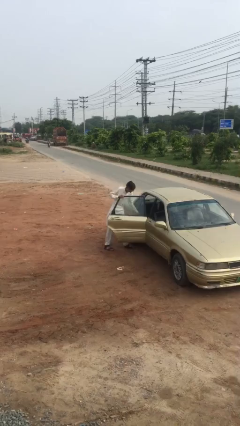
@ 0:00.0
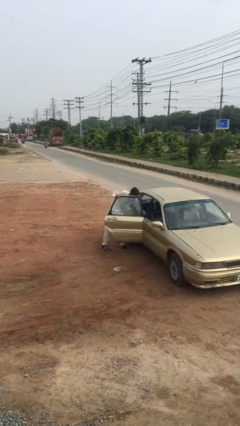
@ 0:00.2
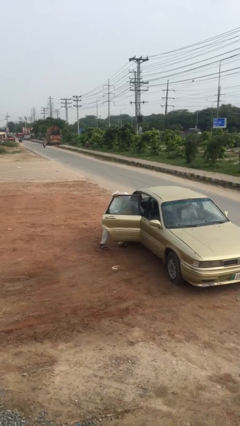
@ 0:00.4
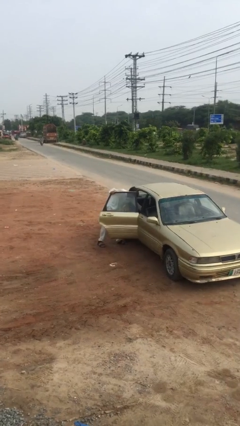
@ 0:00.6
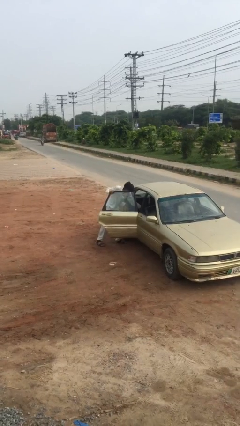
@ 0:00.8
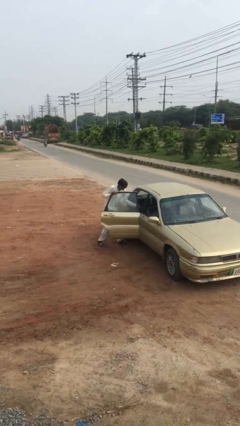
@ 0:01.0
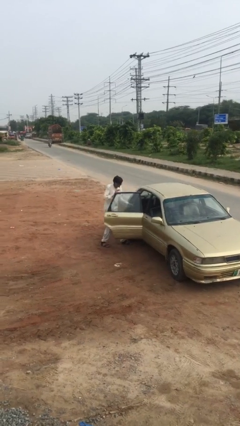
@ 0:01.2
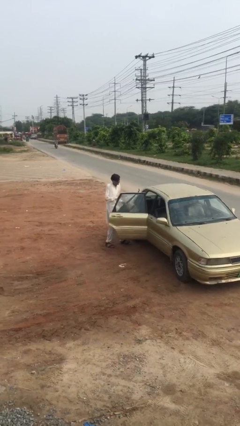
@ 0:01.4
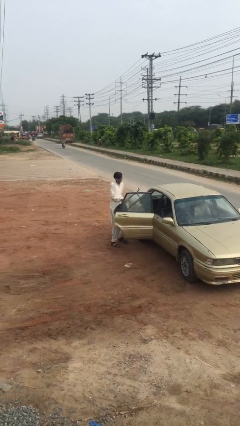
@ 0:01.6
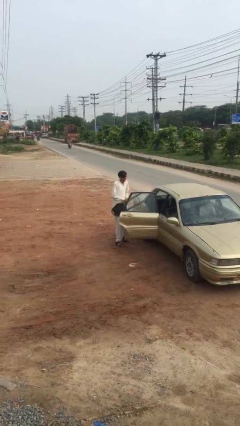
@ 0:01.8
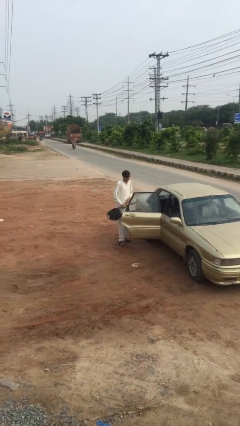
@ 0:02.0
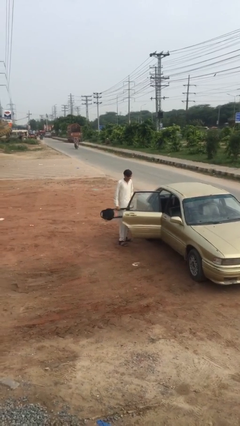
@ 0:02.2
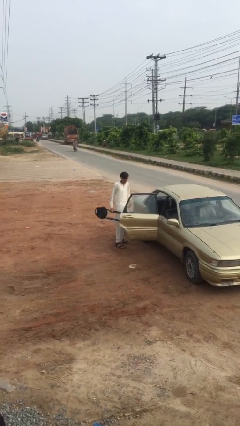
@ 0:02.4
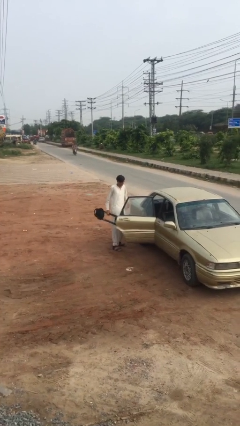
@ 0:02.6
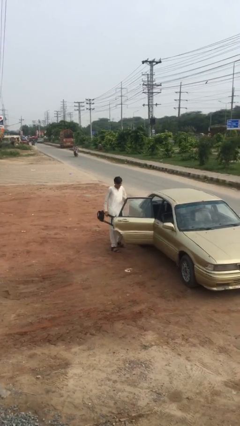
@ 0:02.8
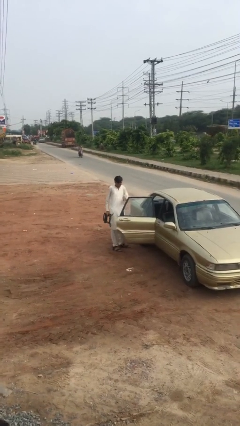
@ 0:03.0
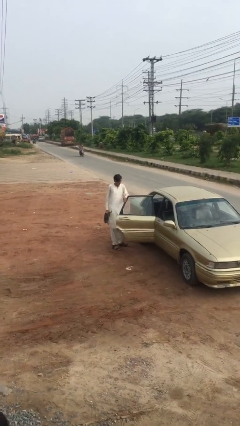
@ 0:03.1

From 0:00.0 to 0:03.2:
person unloads car

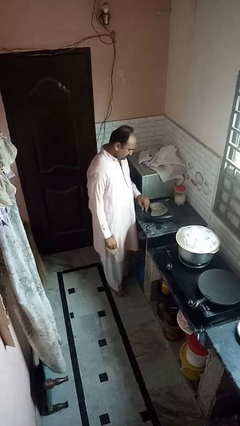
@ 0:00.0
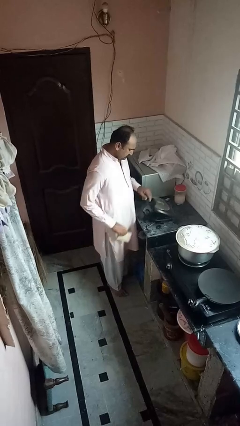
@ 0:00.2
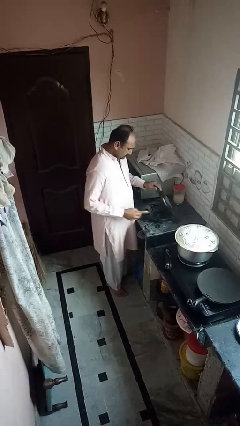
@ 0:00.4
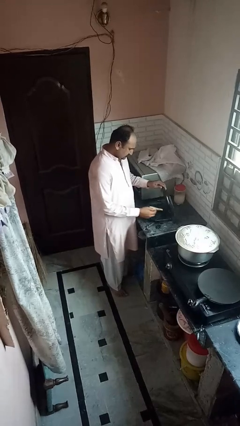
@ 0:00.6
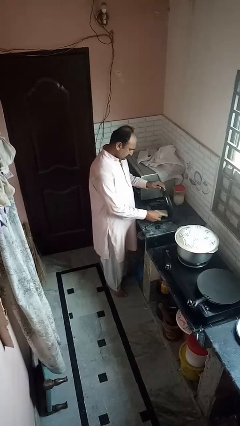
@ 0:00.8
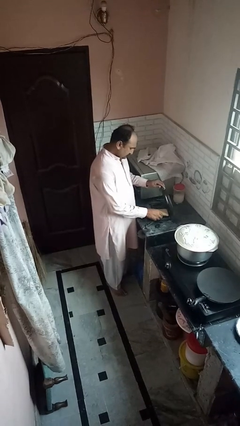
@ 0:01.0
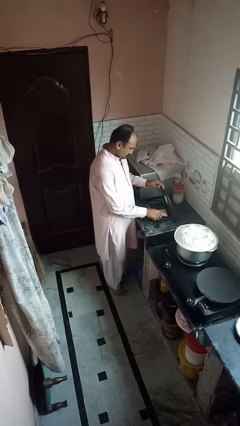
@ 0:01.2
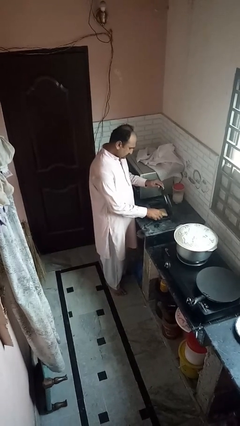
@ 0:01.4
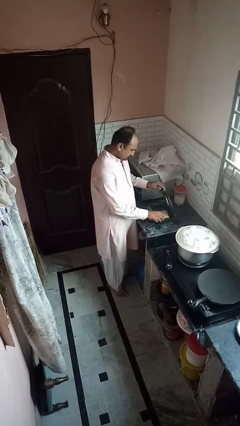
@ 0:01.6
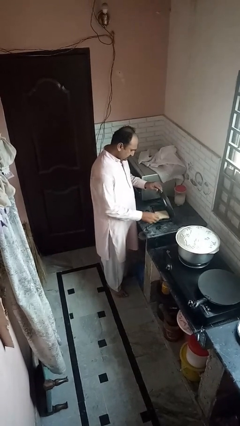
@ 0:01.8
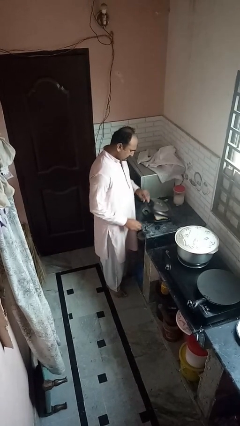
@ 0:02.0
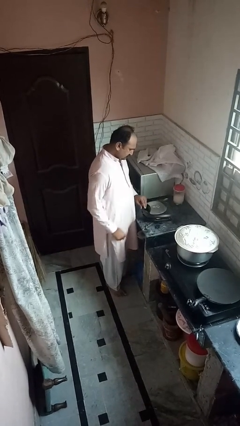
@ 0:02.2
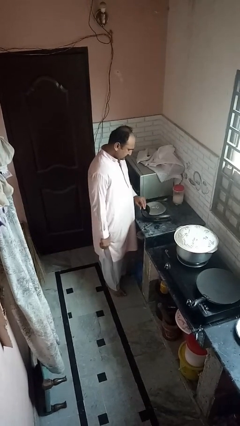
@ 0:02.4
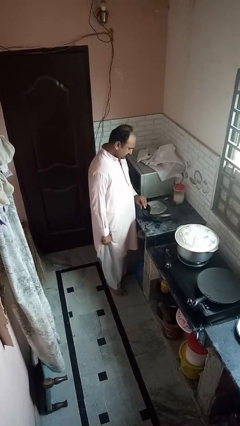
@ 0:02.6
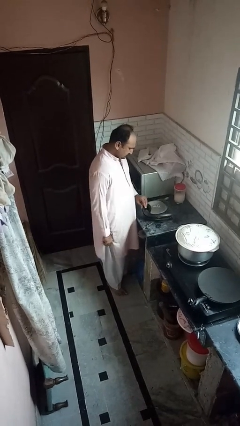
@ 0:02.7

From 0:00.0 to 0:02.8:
person puts object into toaster

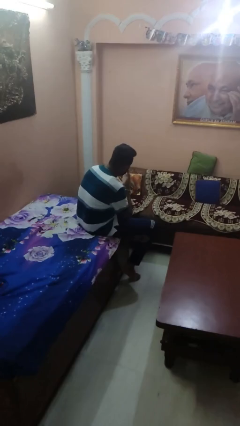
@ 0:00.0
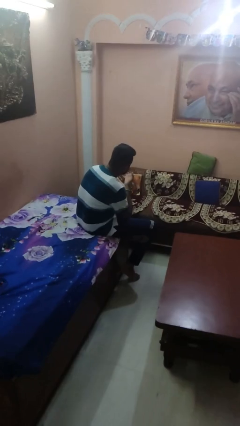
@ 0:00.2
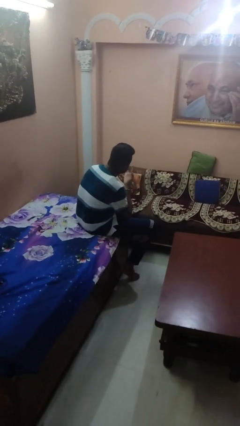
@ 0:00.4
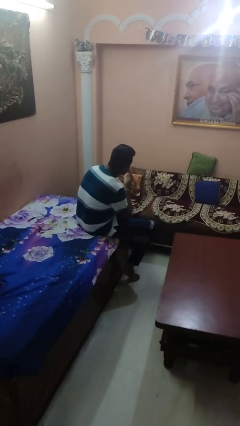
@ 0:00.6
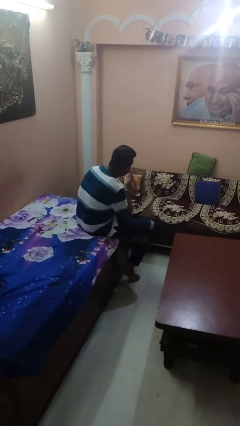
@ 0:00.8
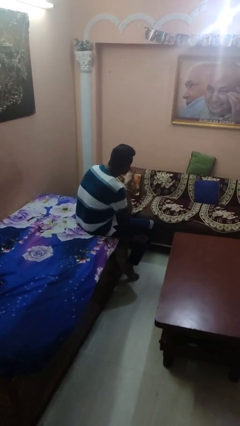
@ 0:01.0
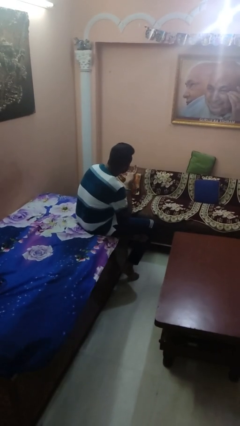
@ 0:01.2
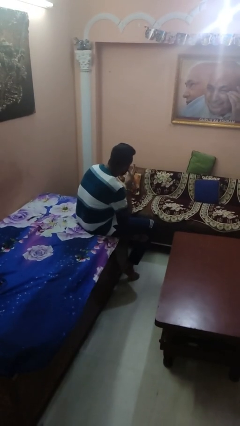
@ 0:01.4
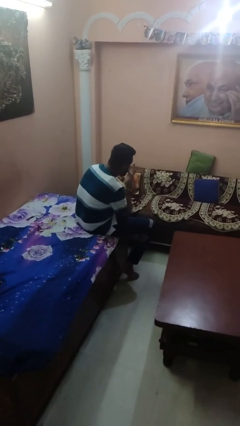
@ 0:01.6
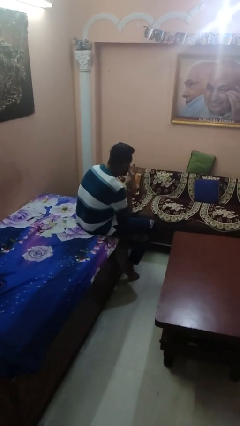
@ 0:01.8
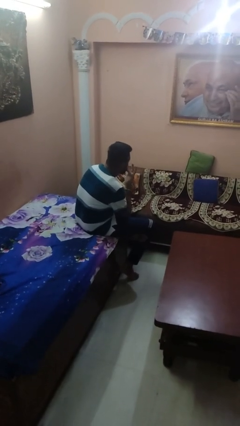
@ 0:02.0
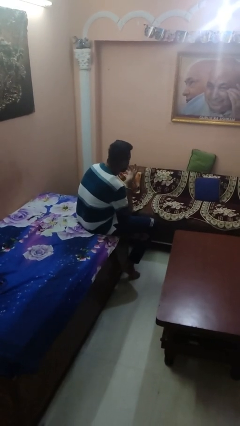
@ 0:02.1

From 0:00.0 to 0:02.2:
person licks fingers

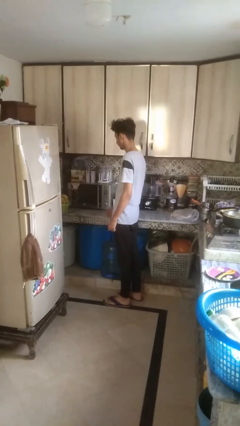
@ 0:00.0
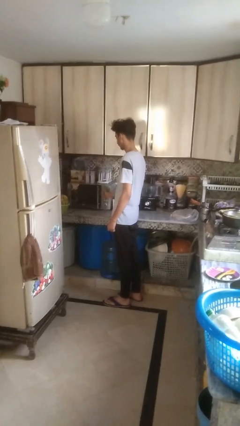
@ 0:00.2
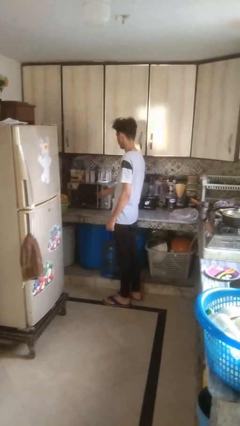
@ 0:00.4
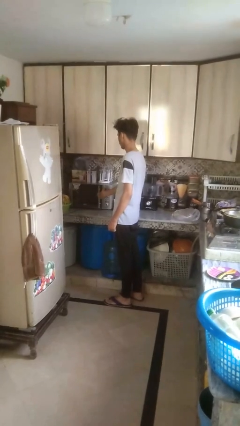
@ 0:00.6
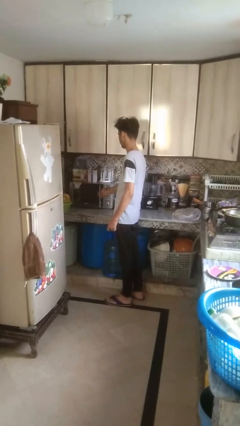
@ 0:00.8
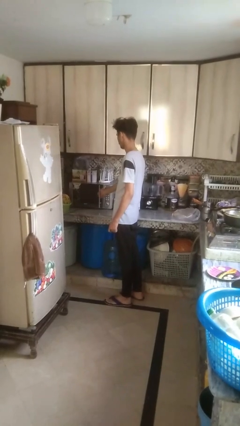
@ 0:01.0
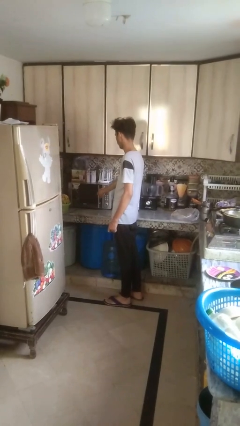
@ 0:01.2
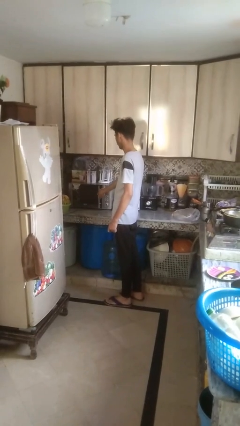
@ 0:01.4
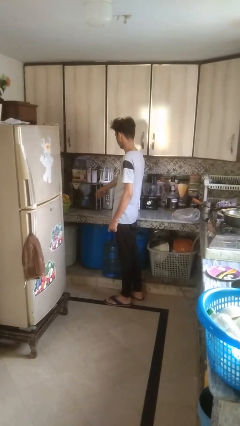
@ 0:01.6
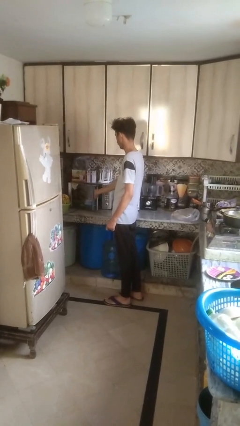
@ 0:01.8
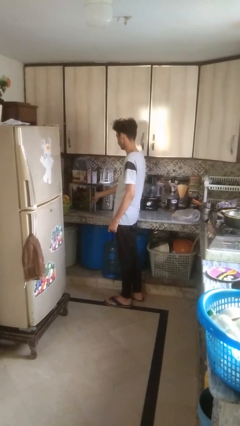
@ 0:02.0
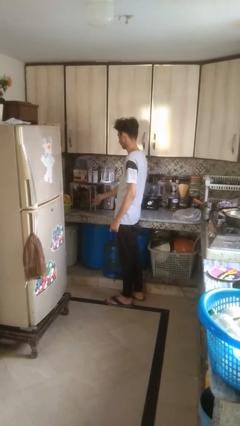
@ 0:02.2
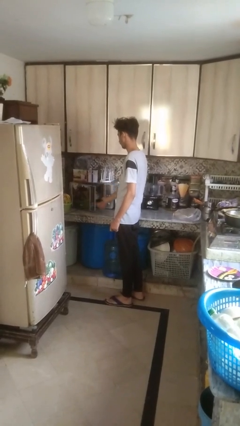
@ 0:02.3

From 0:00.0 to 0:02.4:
person opens oven door

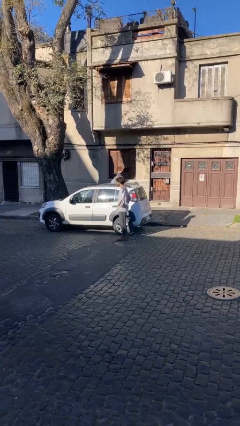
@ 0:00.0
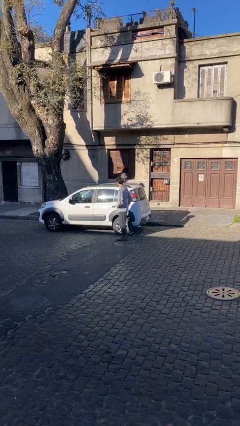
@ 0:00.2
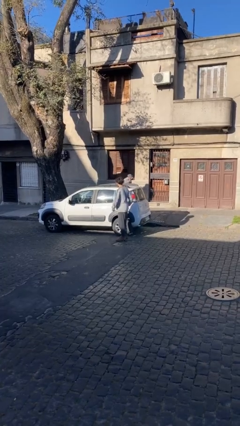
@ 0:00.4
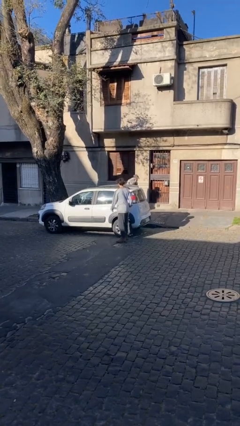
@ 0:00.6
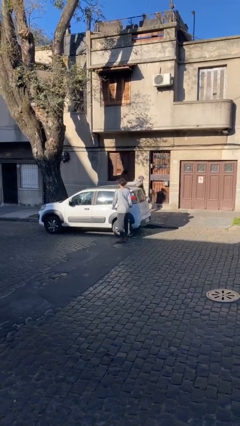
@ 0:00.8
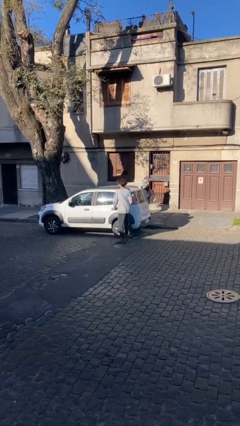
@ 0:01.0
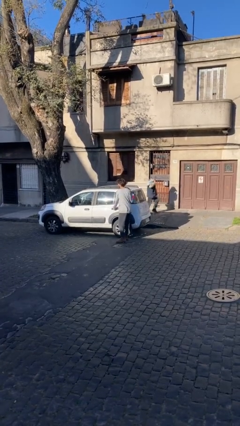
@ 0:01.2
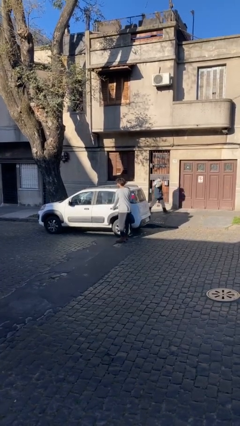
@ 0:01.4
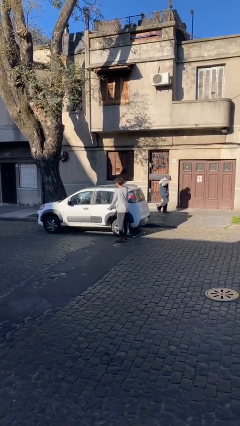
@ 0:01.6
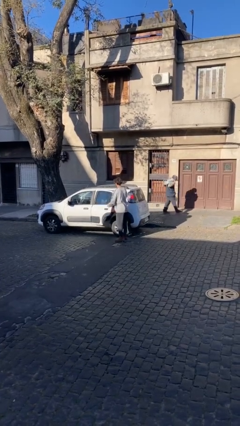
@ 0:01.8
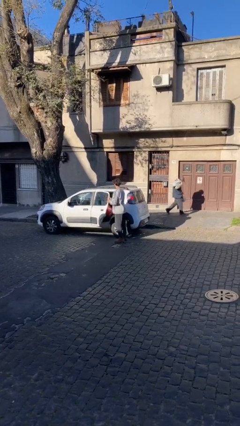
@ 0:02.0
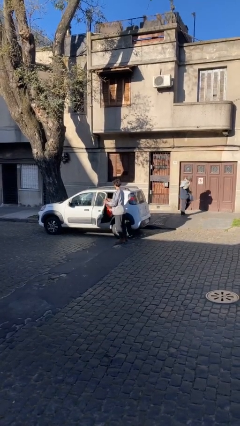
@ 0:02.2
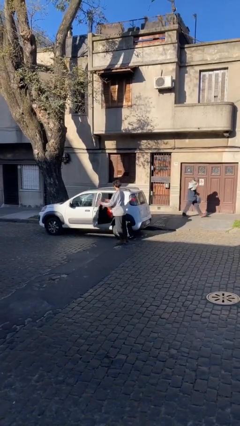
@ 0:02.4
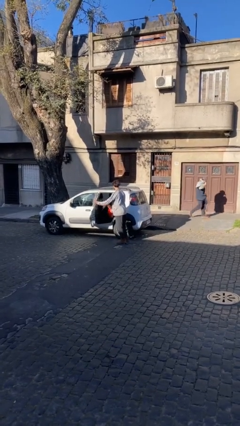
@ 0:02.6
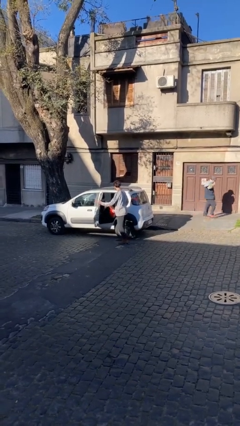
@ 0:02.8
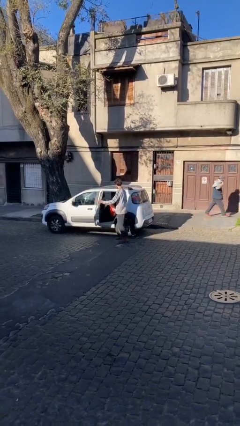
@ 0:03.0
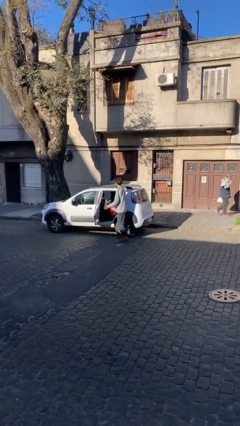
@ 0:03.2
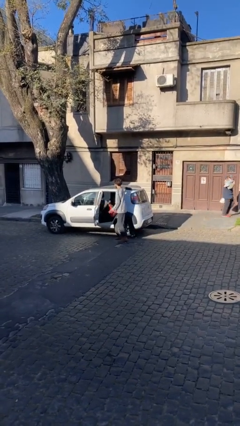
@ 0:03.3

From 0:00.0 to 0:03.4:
person opens car door

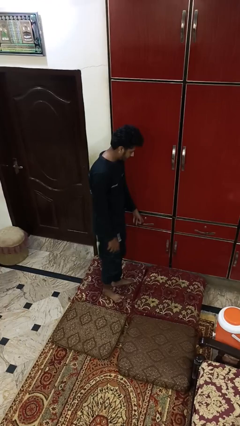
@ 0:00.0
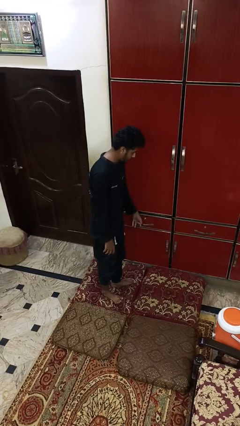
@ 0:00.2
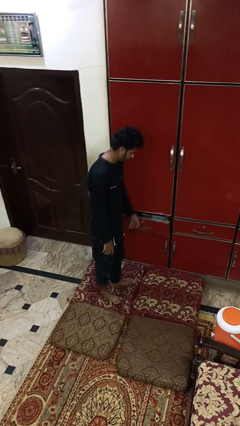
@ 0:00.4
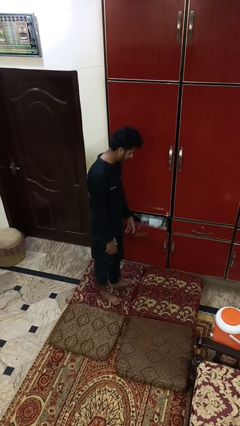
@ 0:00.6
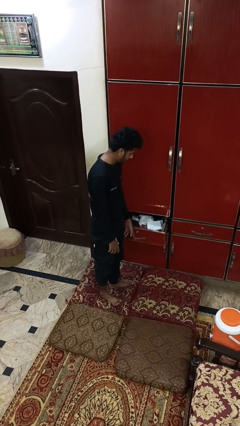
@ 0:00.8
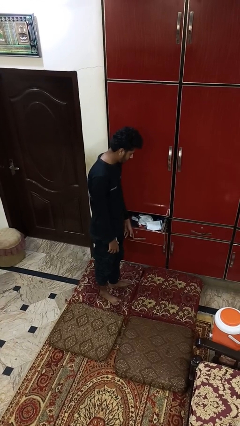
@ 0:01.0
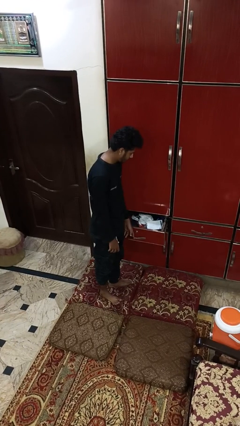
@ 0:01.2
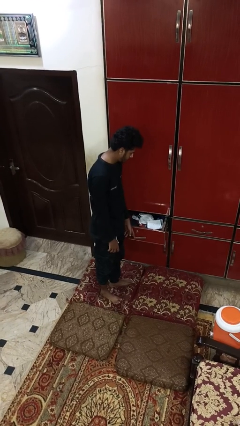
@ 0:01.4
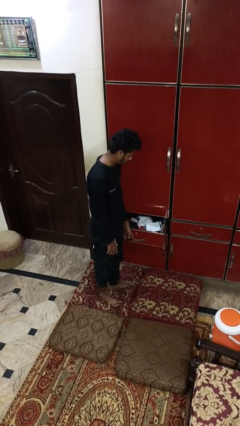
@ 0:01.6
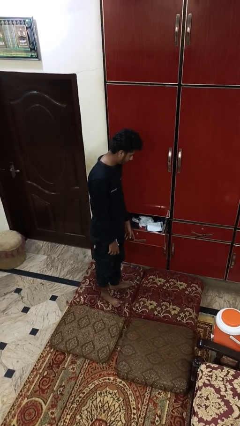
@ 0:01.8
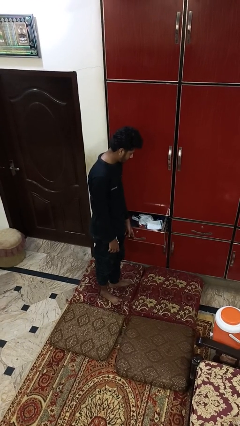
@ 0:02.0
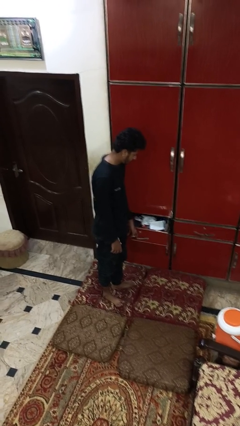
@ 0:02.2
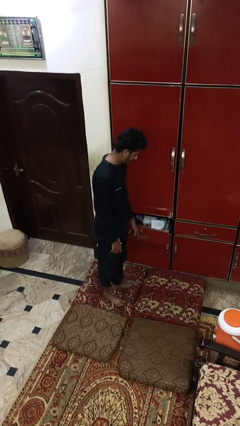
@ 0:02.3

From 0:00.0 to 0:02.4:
person opens dresser drawer

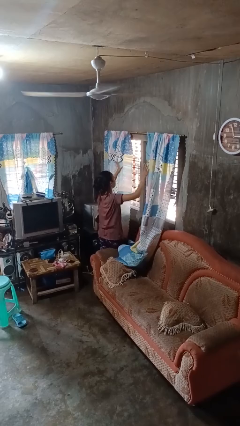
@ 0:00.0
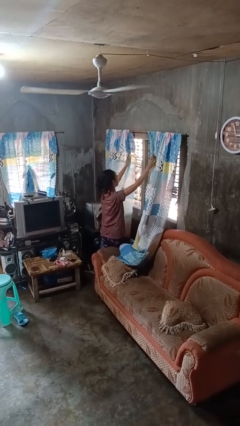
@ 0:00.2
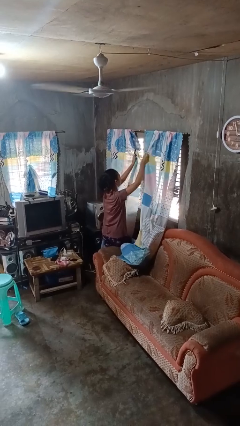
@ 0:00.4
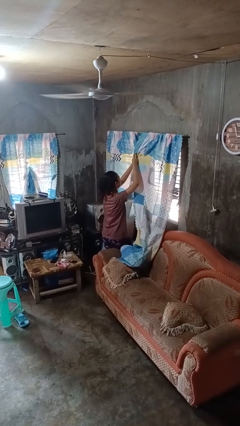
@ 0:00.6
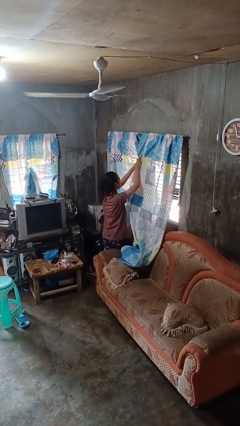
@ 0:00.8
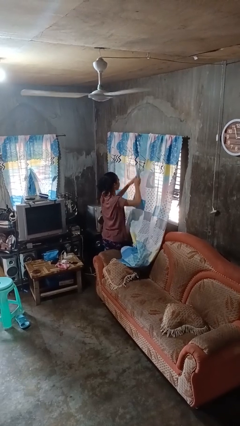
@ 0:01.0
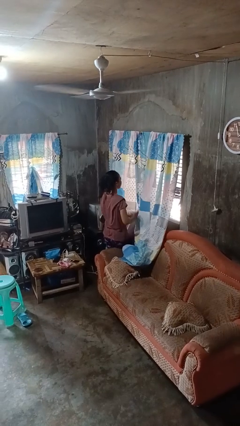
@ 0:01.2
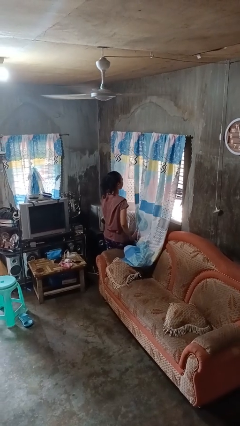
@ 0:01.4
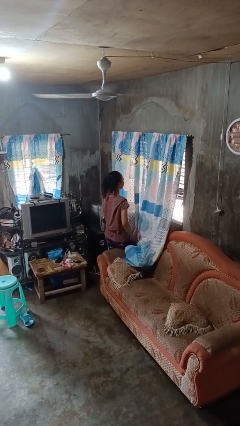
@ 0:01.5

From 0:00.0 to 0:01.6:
person closes curtains
